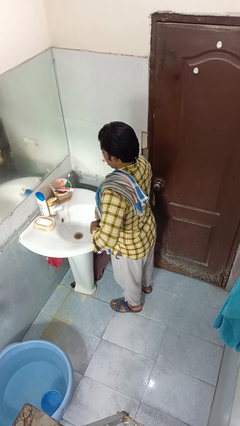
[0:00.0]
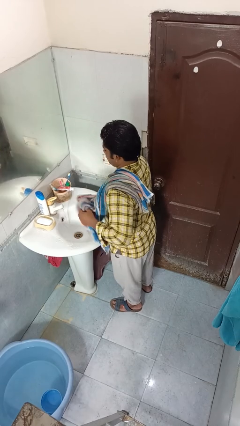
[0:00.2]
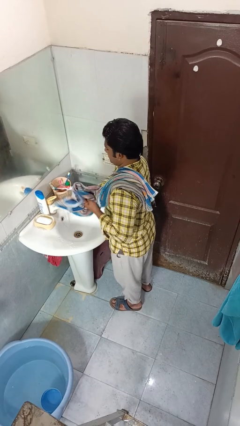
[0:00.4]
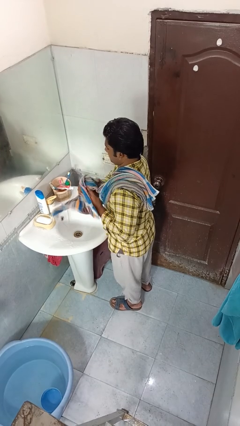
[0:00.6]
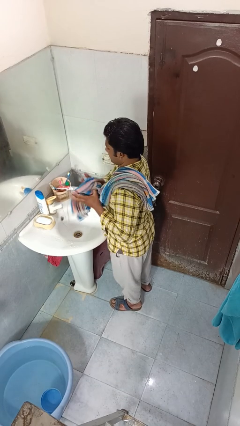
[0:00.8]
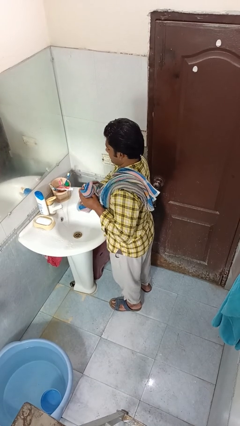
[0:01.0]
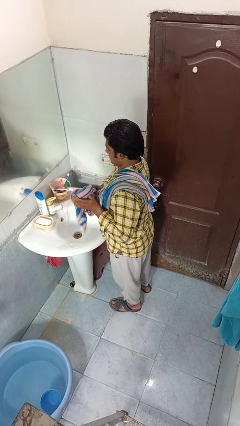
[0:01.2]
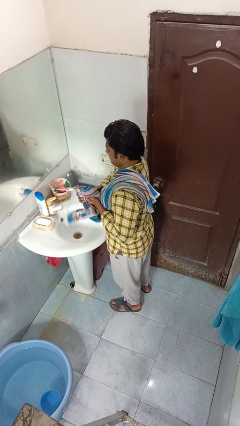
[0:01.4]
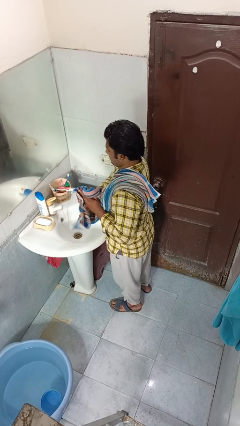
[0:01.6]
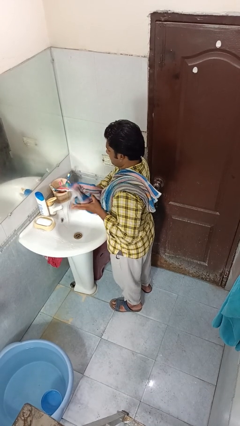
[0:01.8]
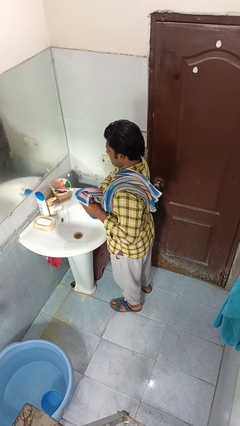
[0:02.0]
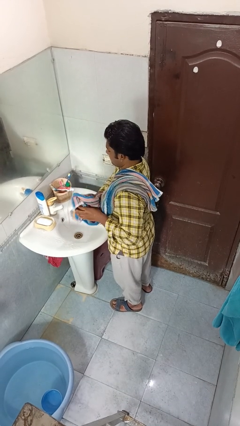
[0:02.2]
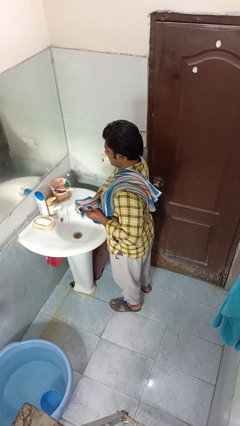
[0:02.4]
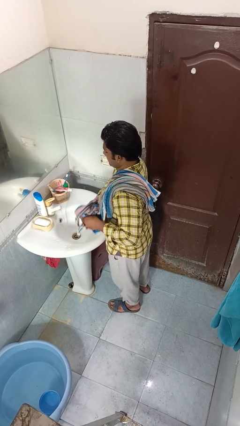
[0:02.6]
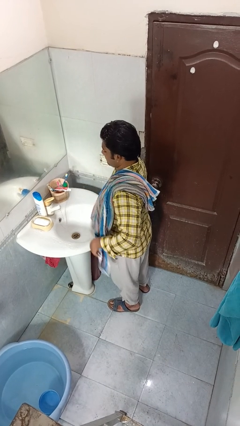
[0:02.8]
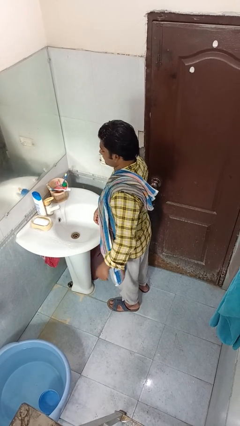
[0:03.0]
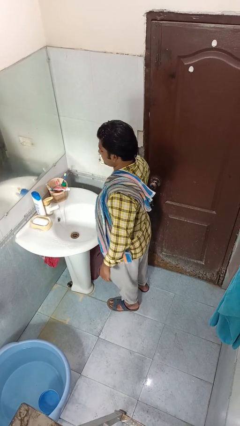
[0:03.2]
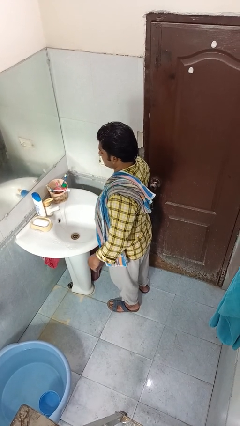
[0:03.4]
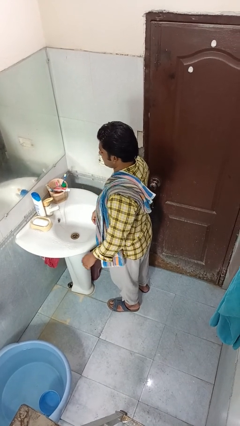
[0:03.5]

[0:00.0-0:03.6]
person dries hands with towel

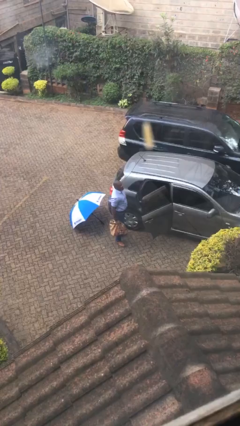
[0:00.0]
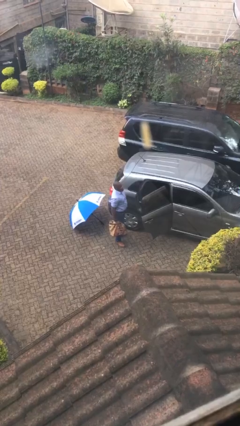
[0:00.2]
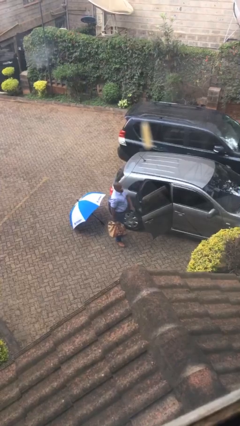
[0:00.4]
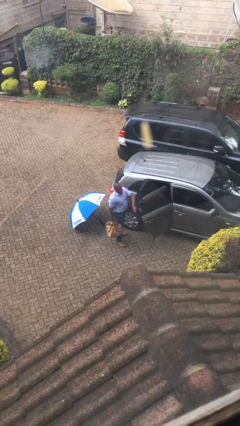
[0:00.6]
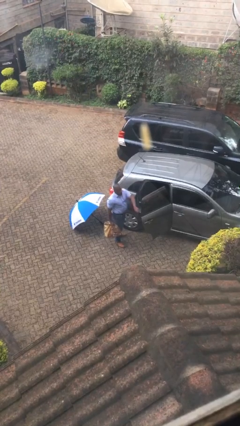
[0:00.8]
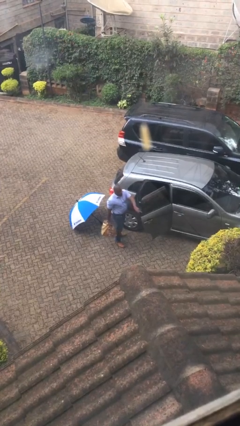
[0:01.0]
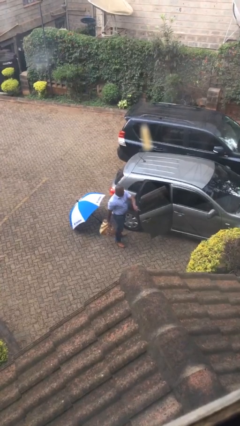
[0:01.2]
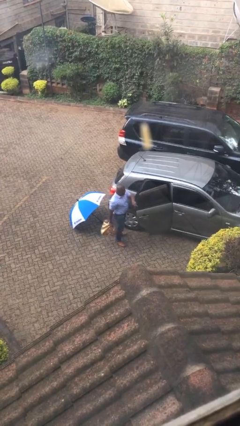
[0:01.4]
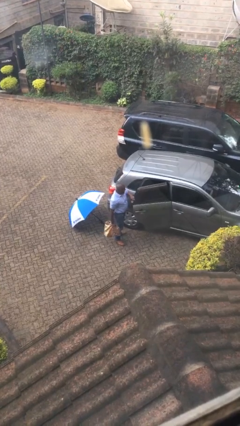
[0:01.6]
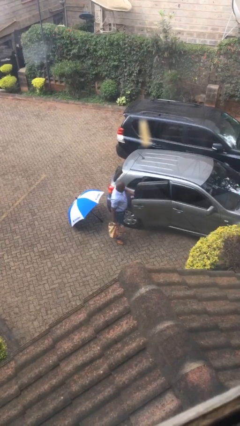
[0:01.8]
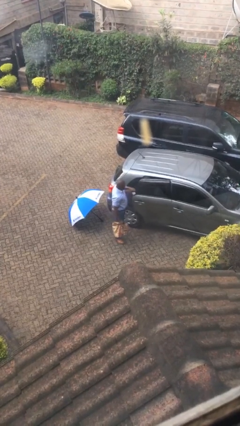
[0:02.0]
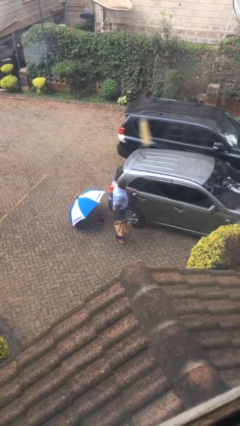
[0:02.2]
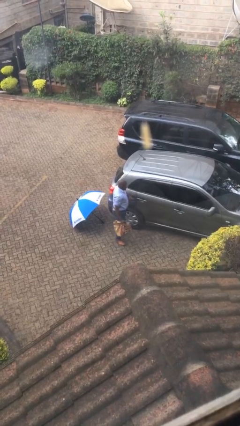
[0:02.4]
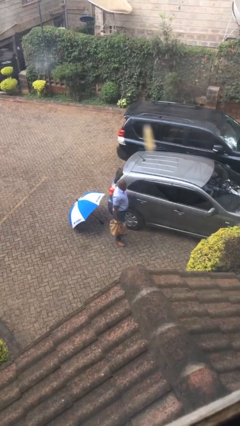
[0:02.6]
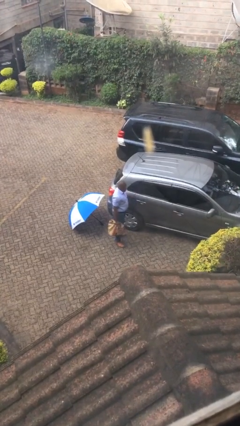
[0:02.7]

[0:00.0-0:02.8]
person closes car door

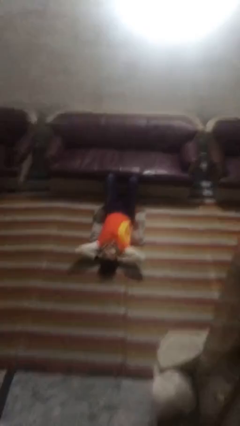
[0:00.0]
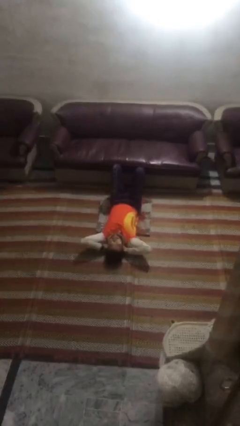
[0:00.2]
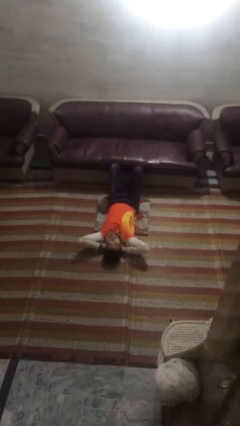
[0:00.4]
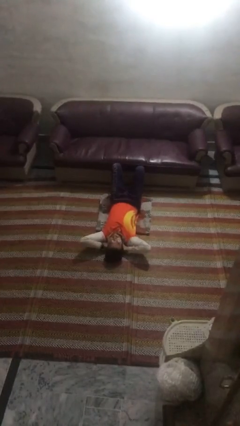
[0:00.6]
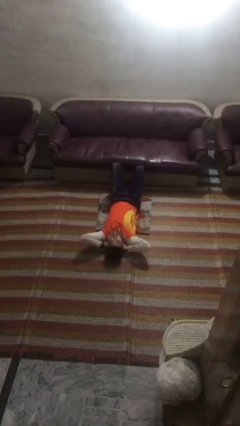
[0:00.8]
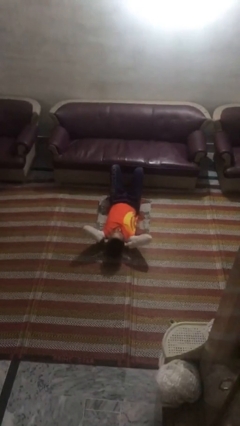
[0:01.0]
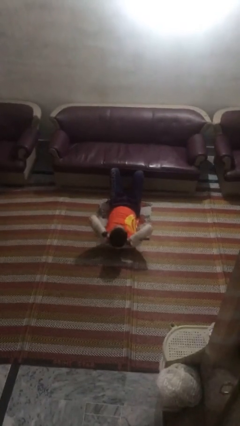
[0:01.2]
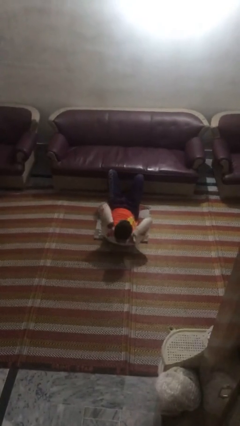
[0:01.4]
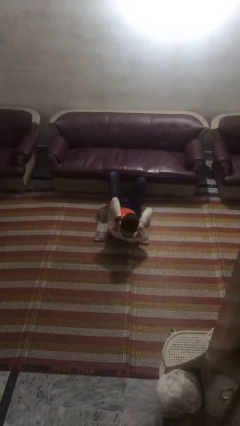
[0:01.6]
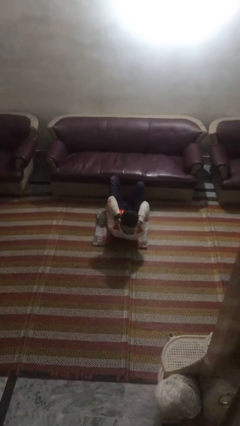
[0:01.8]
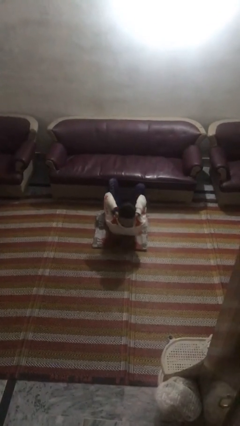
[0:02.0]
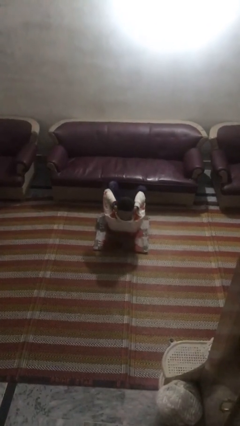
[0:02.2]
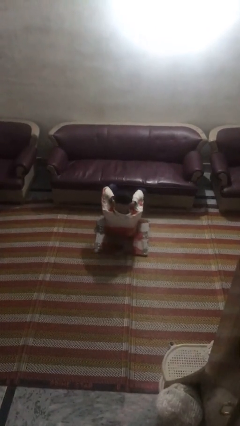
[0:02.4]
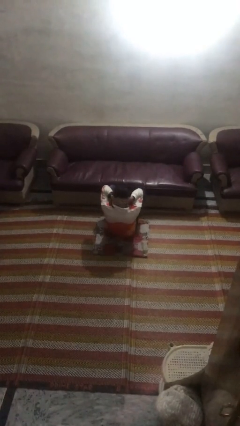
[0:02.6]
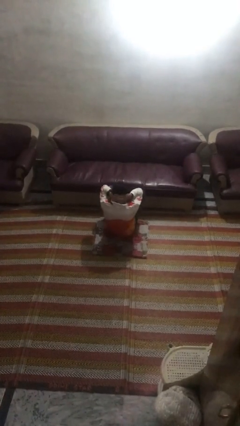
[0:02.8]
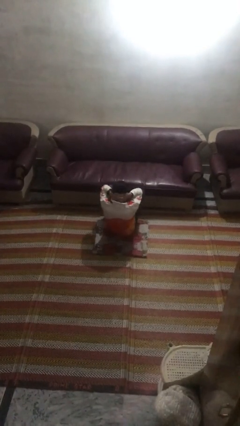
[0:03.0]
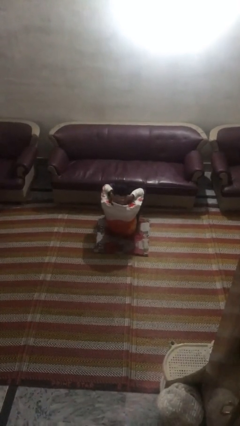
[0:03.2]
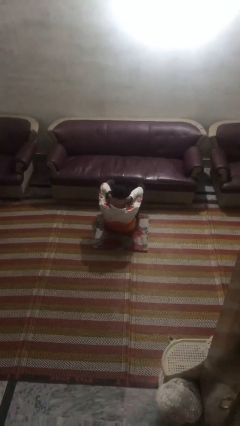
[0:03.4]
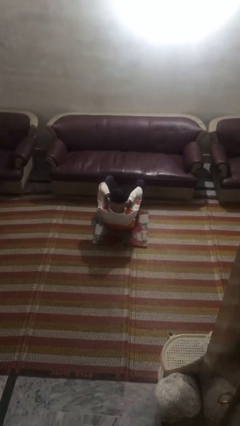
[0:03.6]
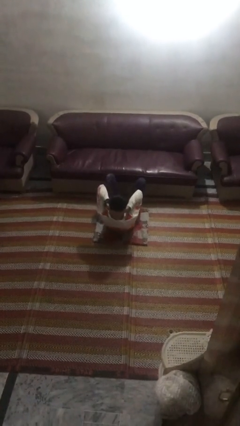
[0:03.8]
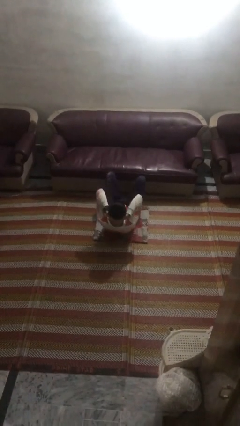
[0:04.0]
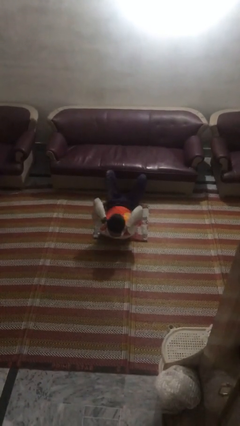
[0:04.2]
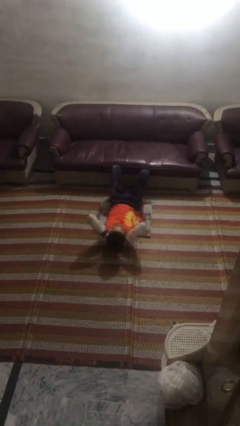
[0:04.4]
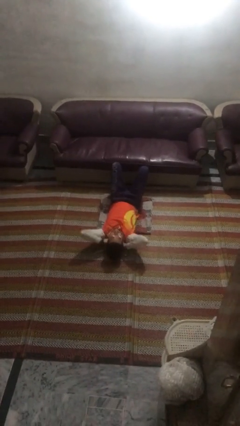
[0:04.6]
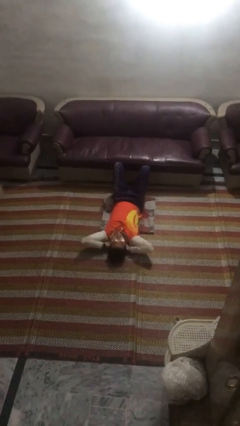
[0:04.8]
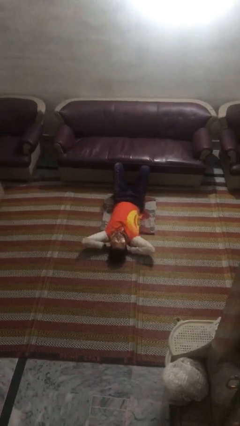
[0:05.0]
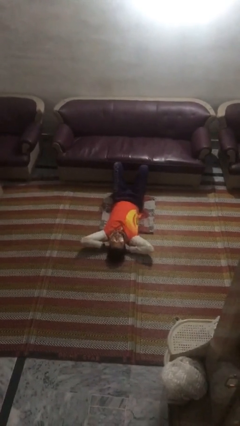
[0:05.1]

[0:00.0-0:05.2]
person exercises with situp

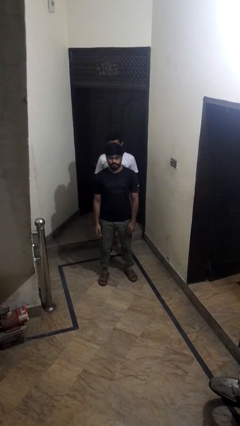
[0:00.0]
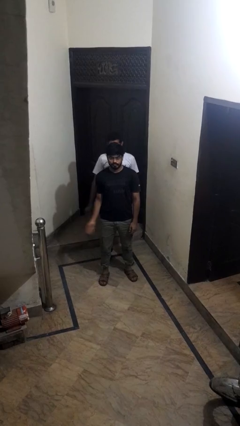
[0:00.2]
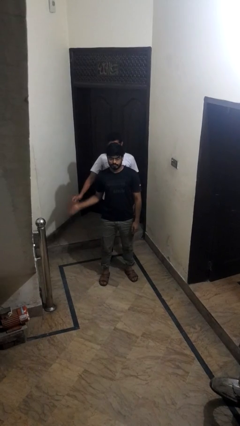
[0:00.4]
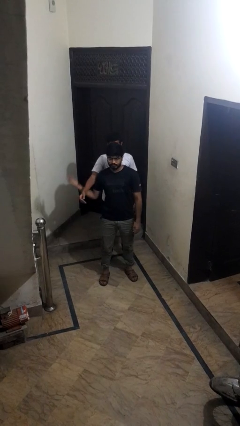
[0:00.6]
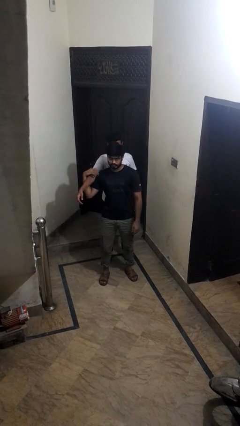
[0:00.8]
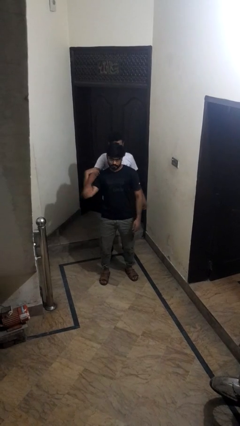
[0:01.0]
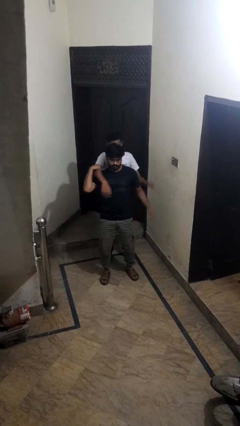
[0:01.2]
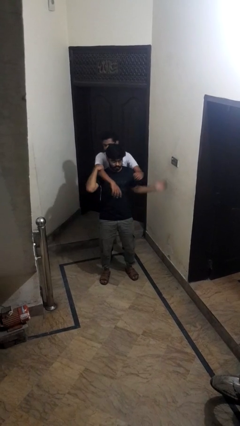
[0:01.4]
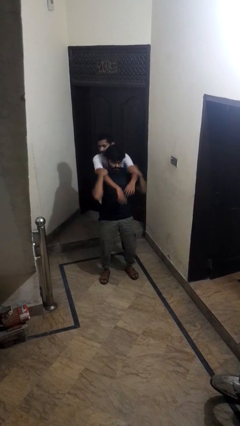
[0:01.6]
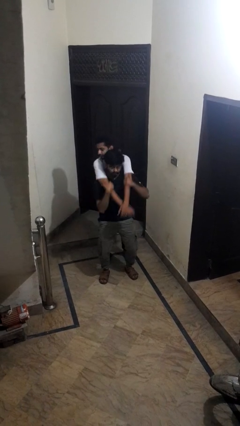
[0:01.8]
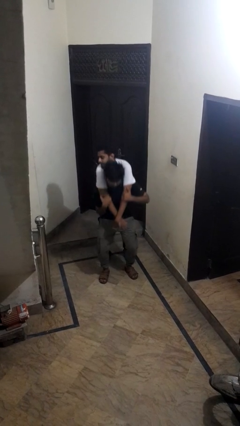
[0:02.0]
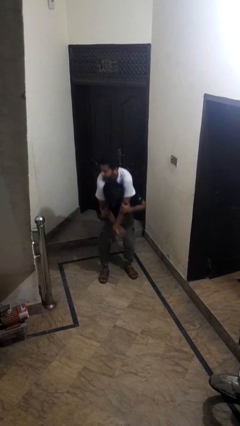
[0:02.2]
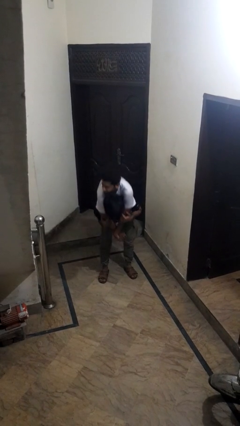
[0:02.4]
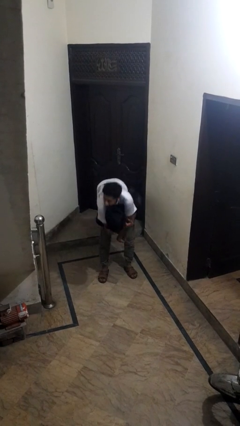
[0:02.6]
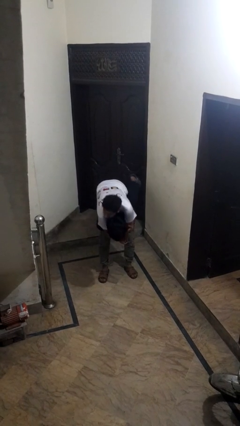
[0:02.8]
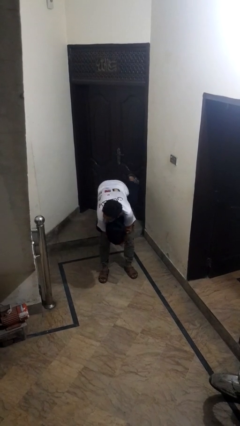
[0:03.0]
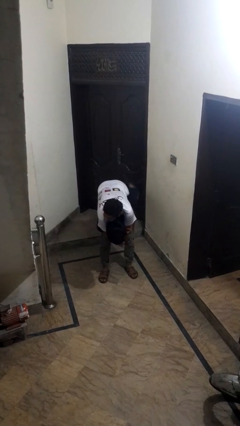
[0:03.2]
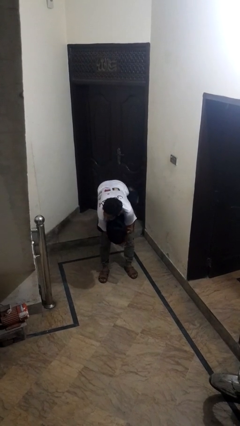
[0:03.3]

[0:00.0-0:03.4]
person carries person over shoulder

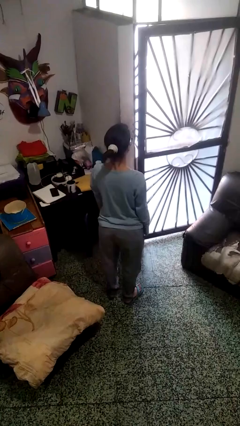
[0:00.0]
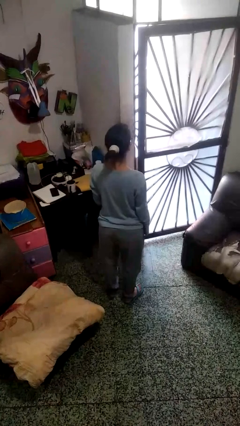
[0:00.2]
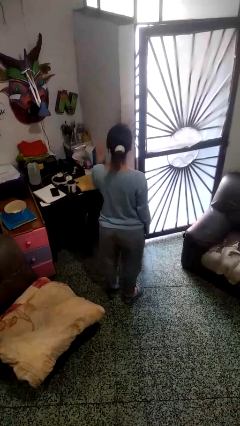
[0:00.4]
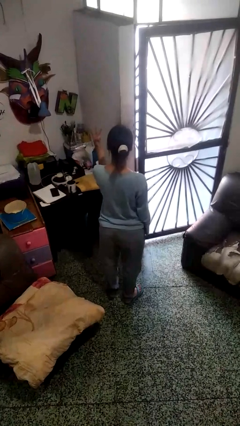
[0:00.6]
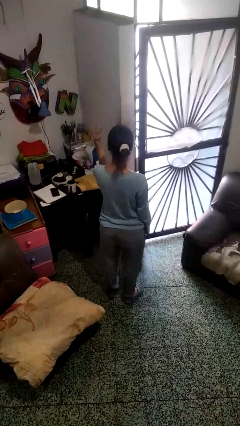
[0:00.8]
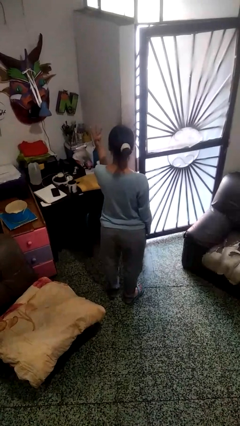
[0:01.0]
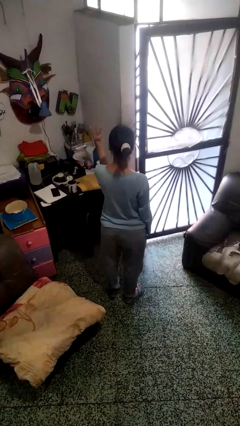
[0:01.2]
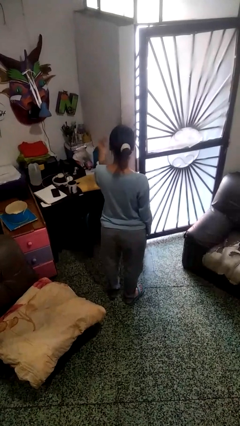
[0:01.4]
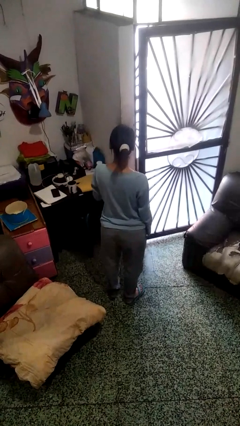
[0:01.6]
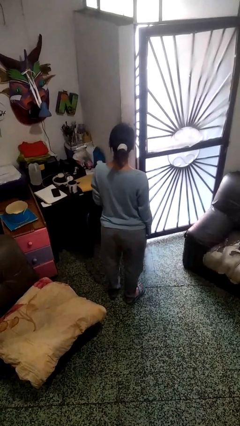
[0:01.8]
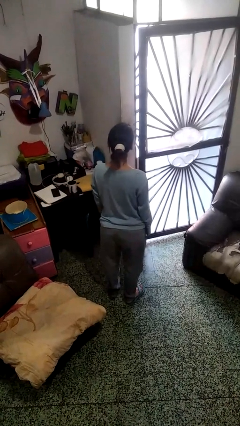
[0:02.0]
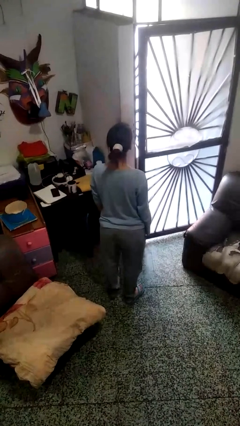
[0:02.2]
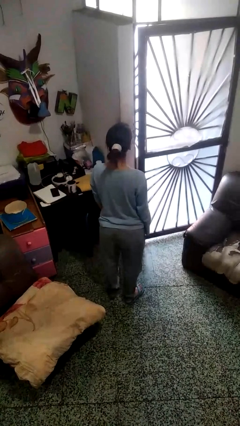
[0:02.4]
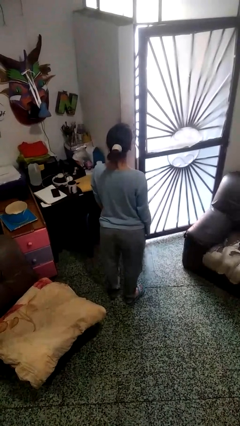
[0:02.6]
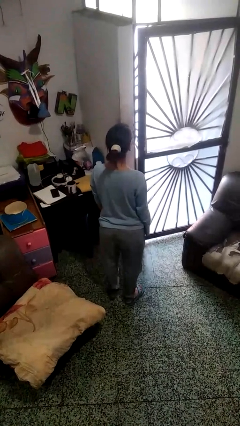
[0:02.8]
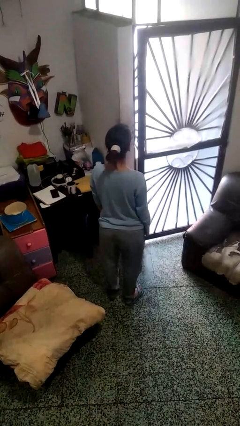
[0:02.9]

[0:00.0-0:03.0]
person gestures number three
